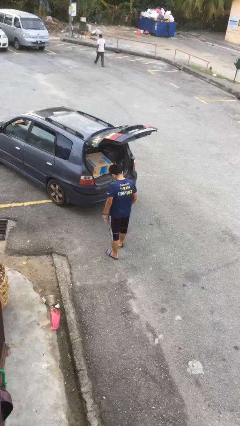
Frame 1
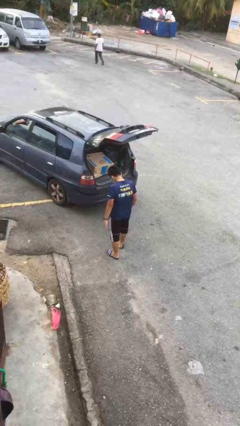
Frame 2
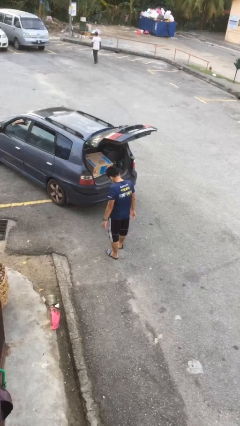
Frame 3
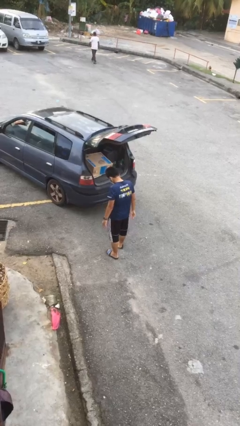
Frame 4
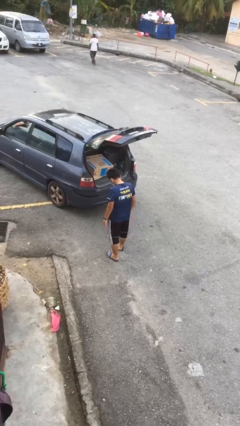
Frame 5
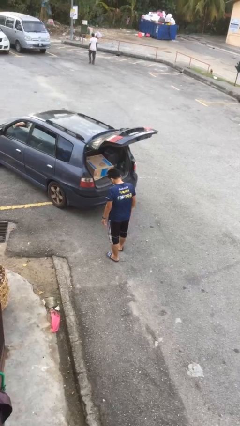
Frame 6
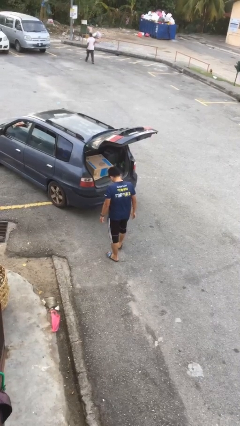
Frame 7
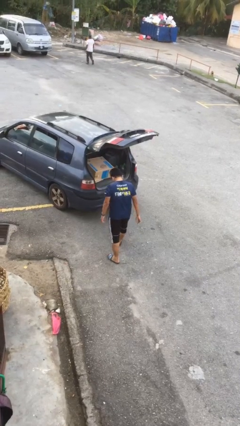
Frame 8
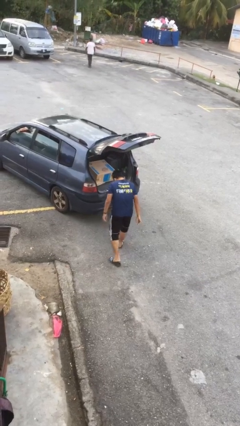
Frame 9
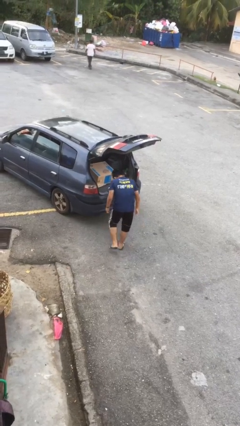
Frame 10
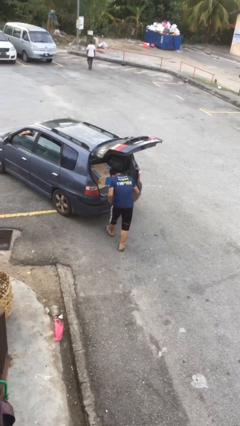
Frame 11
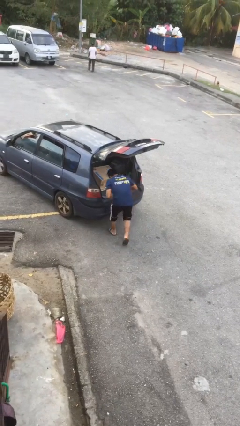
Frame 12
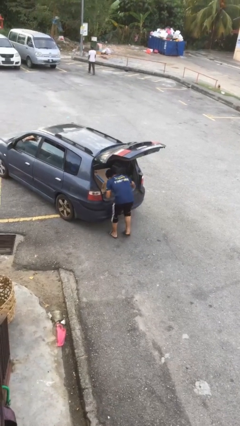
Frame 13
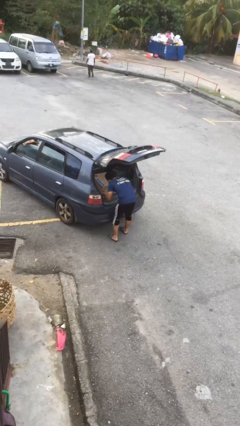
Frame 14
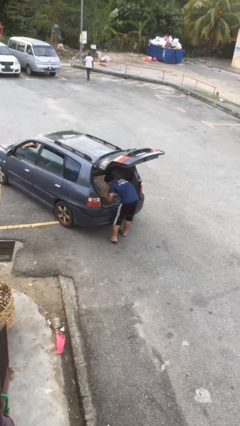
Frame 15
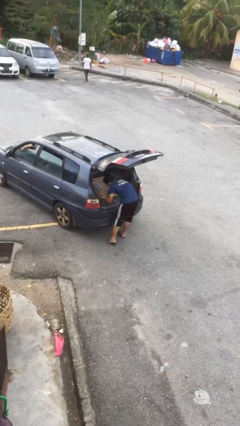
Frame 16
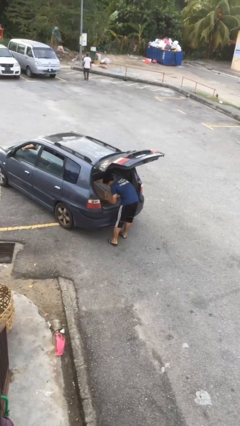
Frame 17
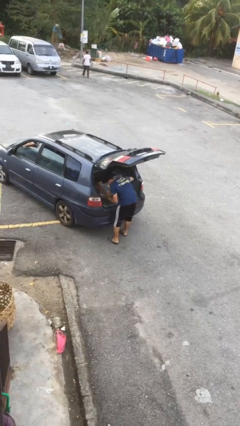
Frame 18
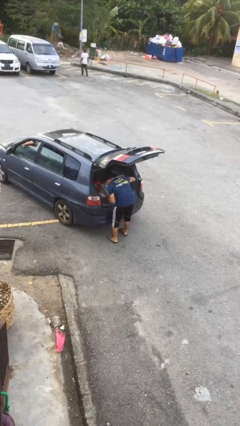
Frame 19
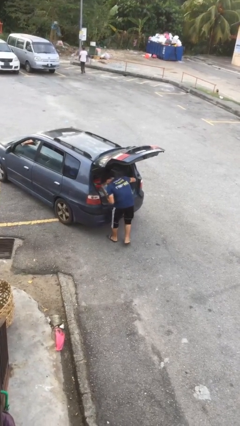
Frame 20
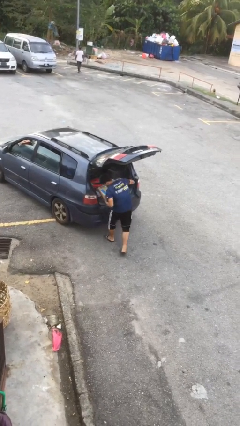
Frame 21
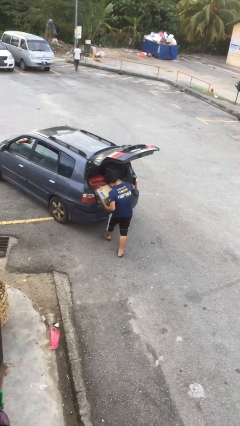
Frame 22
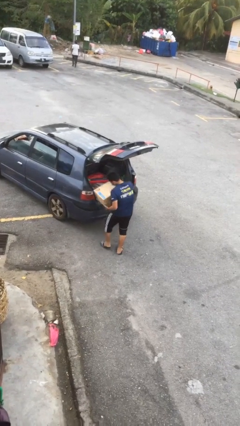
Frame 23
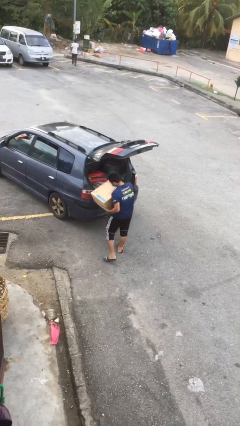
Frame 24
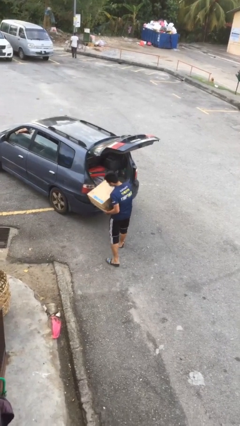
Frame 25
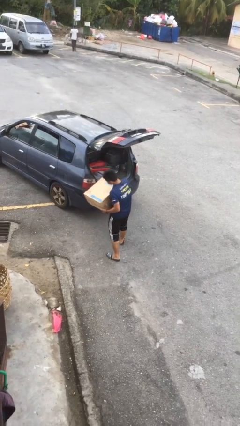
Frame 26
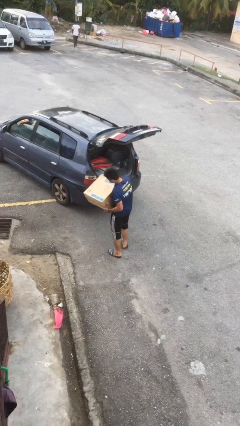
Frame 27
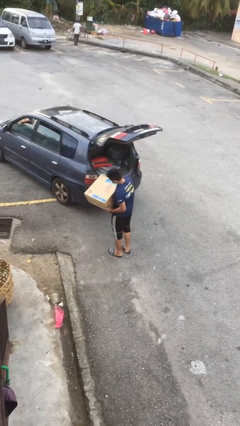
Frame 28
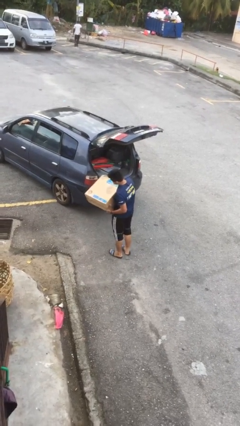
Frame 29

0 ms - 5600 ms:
person unloads car

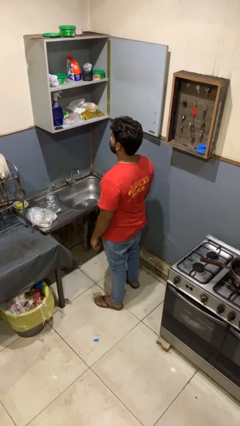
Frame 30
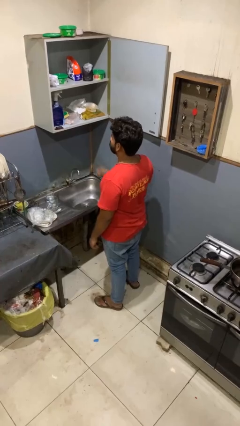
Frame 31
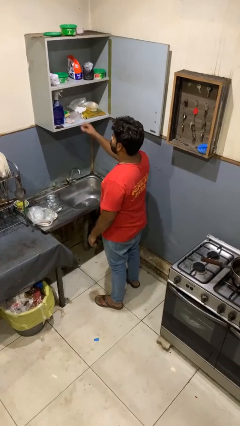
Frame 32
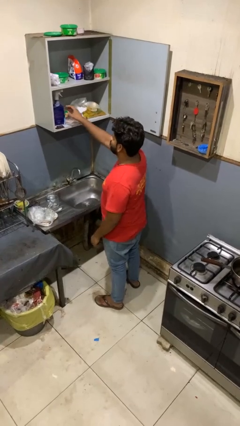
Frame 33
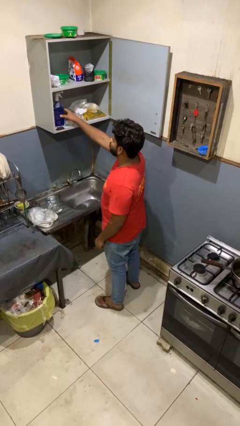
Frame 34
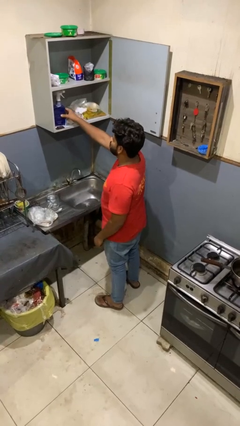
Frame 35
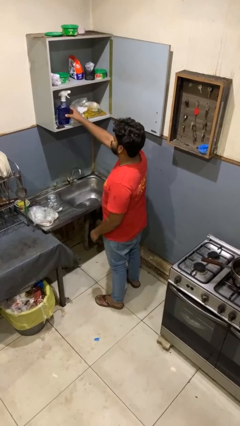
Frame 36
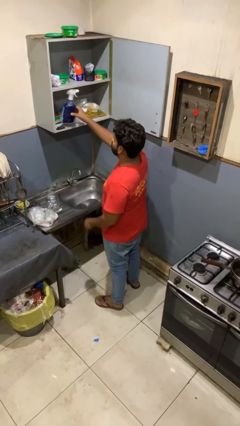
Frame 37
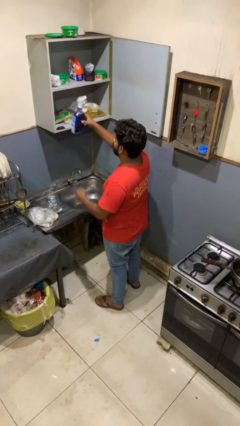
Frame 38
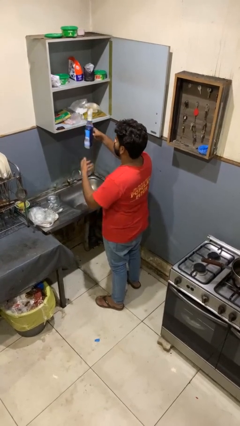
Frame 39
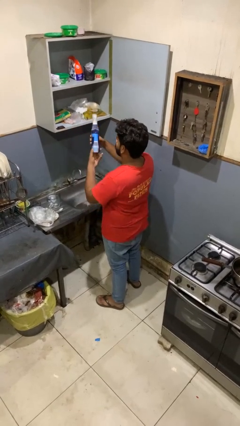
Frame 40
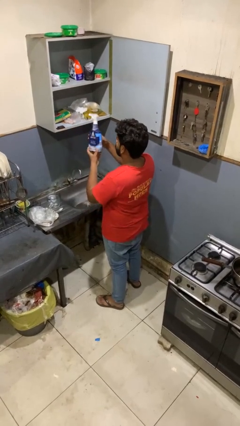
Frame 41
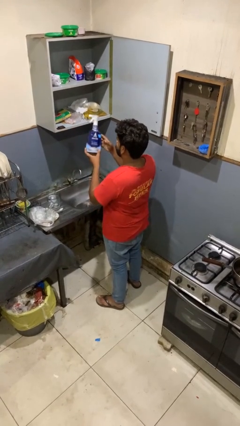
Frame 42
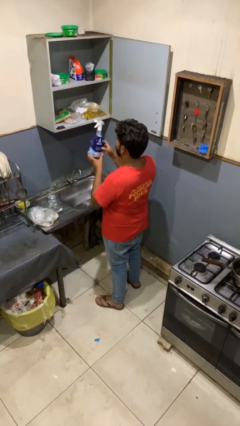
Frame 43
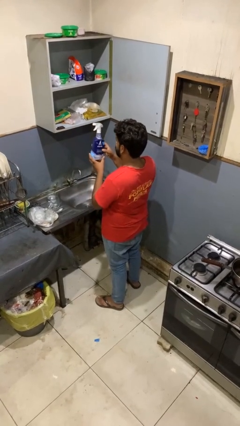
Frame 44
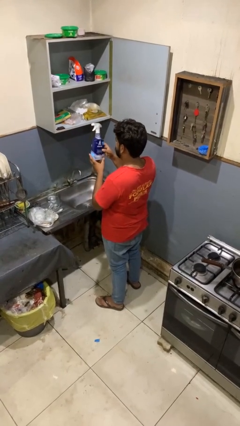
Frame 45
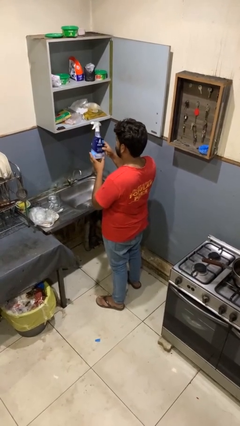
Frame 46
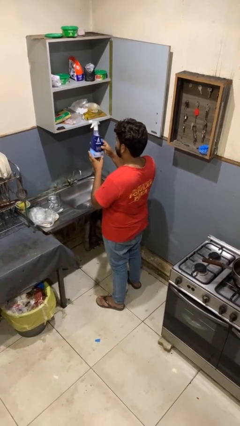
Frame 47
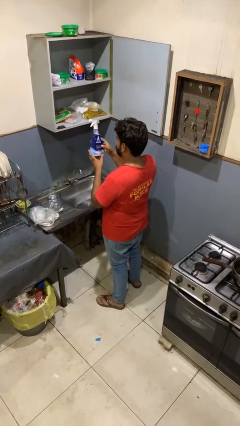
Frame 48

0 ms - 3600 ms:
person picks up object from cabinet

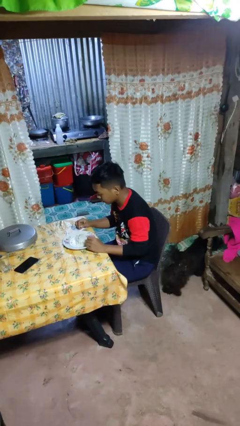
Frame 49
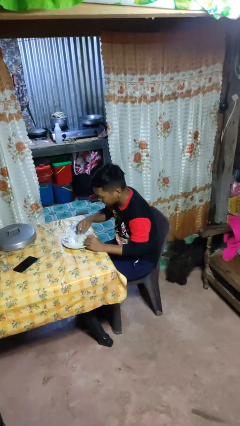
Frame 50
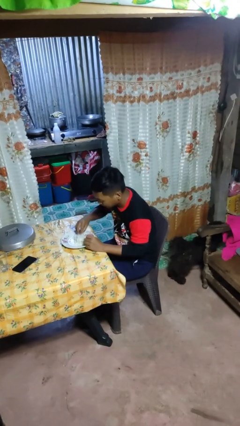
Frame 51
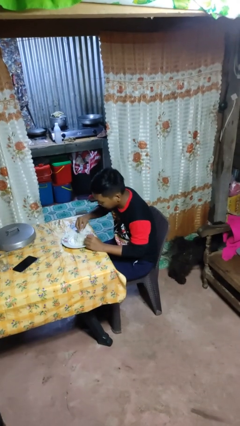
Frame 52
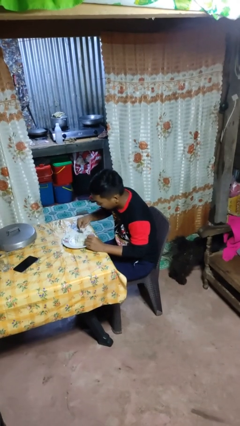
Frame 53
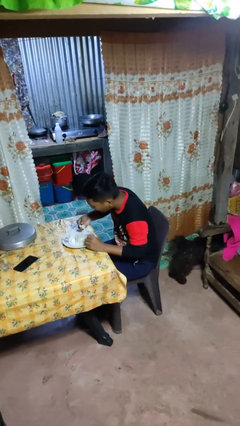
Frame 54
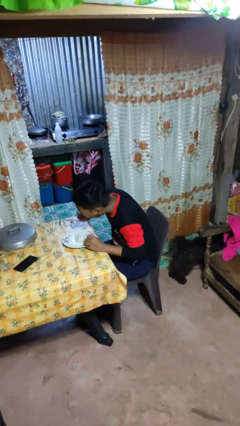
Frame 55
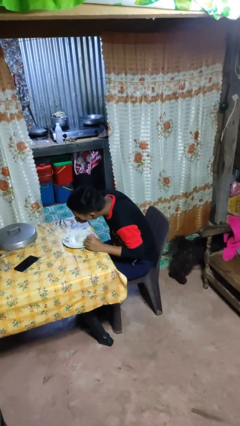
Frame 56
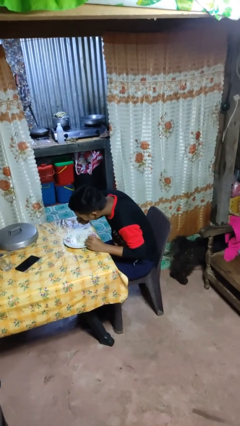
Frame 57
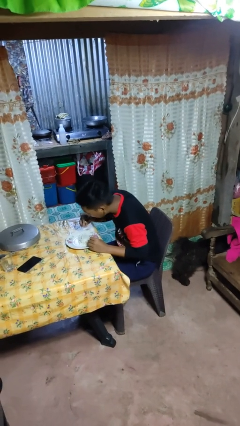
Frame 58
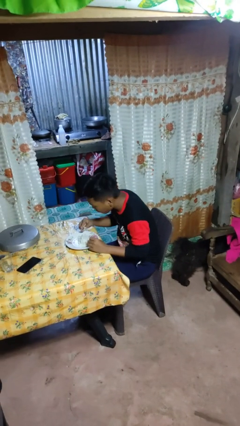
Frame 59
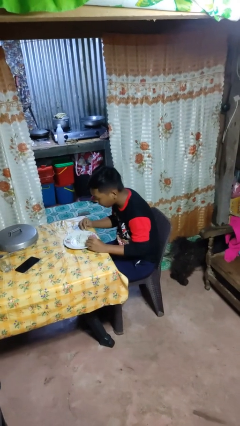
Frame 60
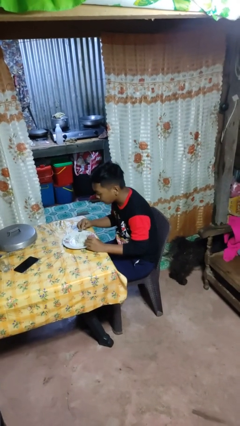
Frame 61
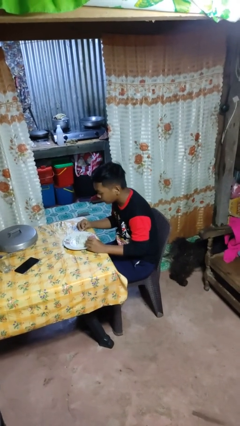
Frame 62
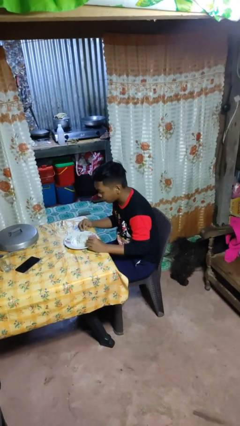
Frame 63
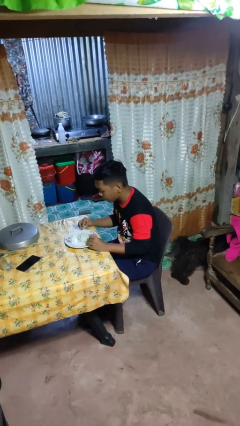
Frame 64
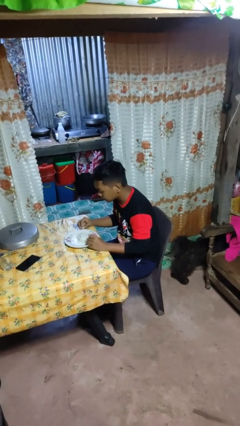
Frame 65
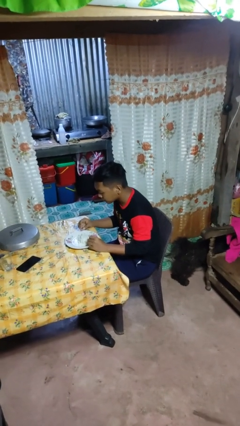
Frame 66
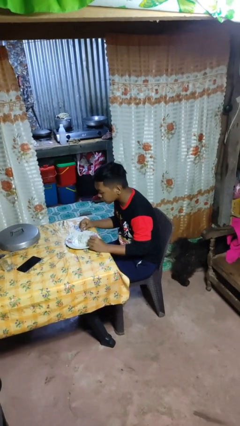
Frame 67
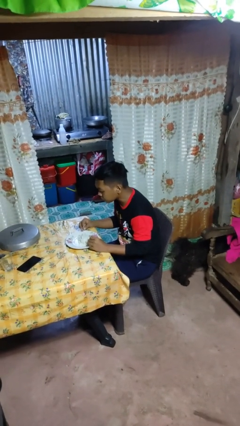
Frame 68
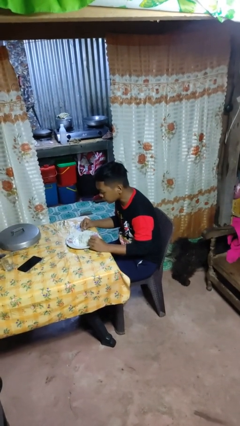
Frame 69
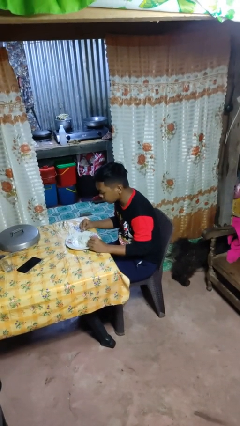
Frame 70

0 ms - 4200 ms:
person eats with hands

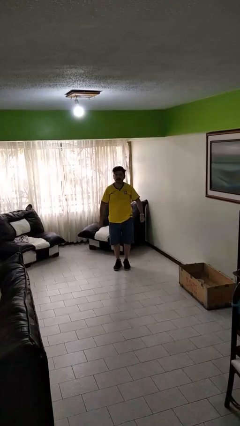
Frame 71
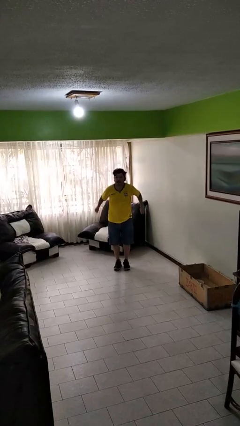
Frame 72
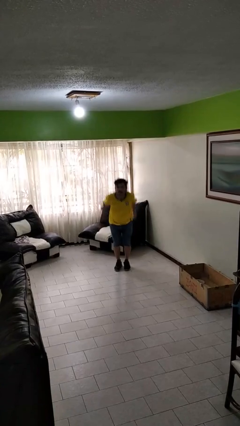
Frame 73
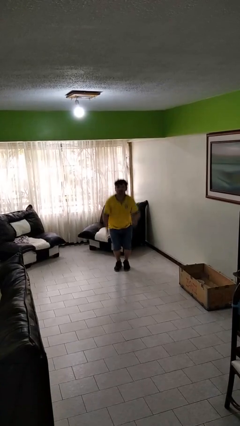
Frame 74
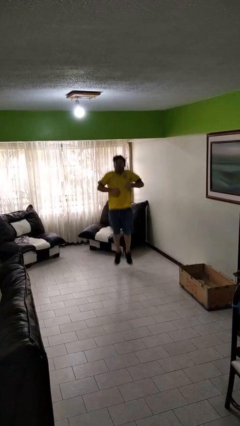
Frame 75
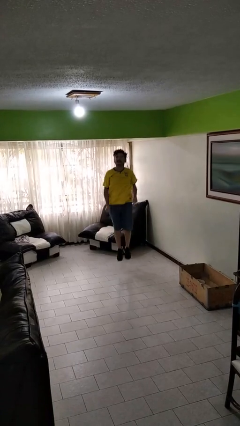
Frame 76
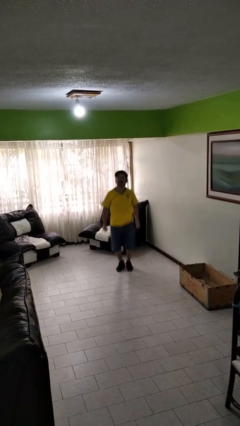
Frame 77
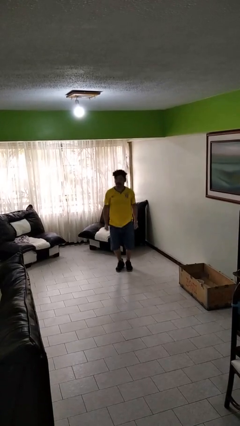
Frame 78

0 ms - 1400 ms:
person jumps

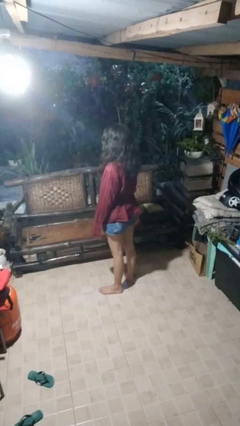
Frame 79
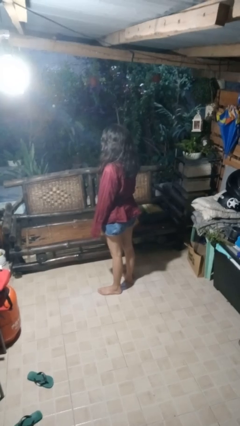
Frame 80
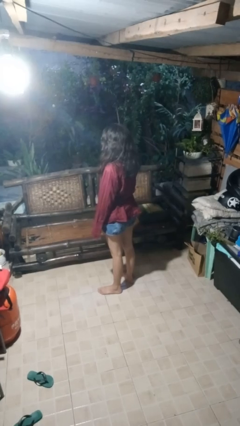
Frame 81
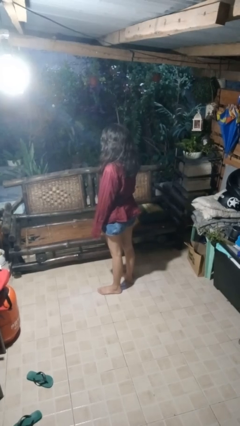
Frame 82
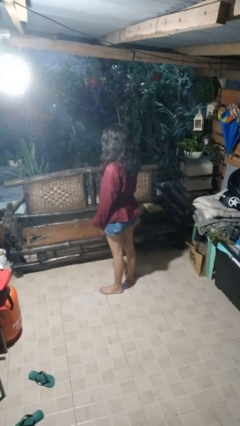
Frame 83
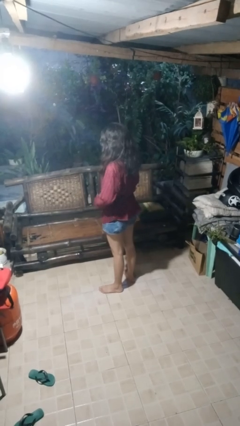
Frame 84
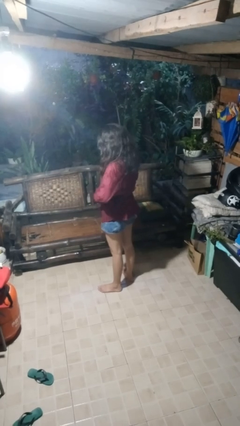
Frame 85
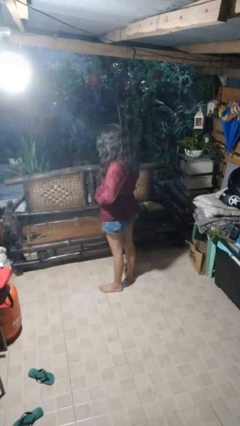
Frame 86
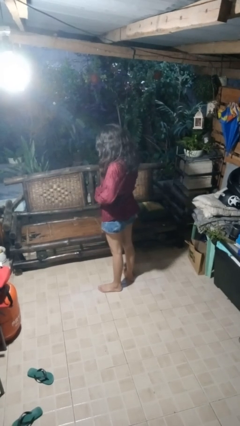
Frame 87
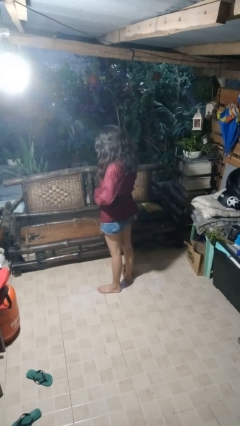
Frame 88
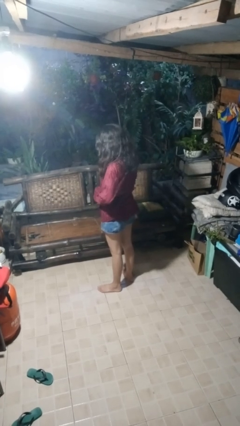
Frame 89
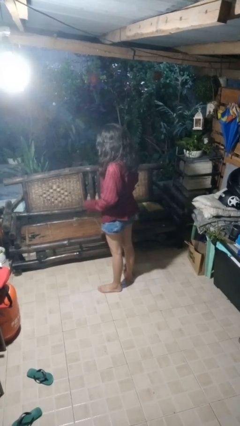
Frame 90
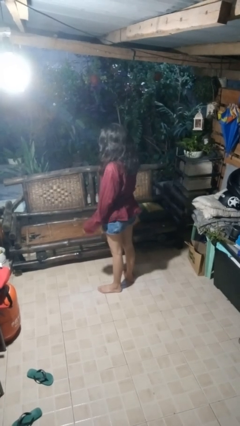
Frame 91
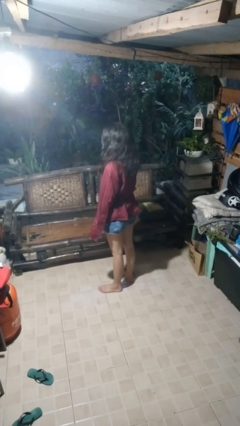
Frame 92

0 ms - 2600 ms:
person buttons shirt
